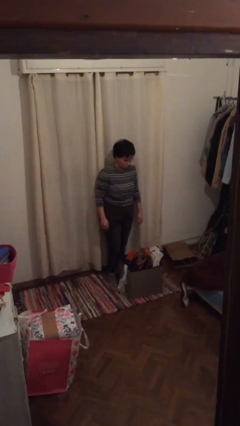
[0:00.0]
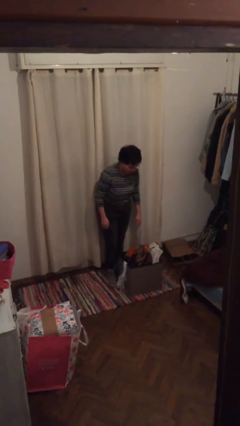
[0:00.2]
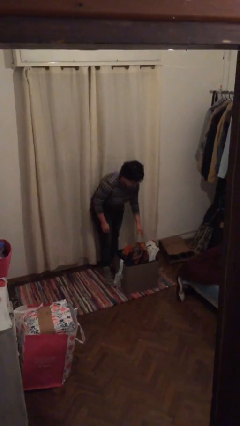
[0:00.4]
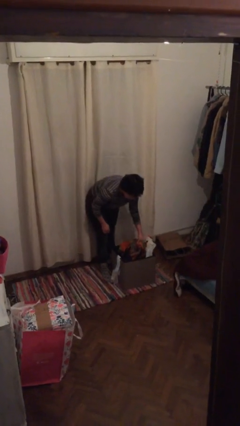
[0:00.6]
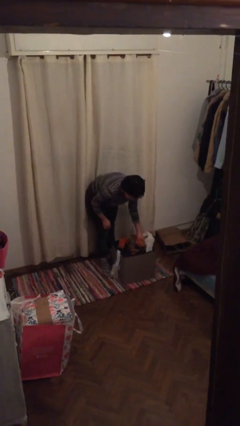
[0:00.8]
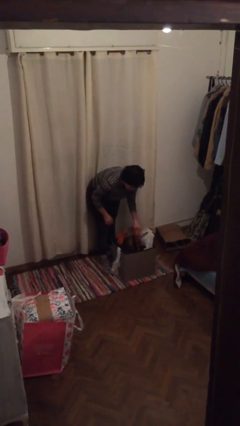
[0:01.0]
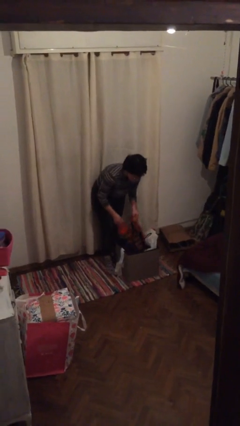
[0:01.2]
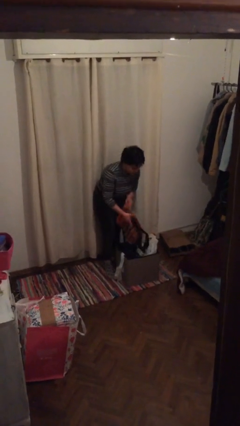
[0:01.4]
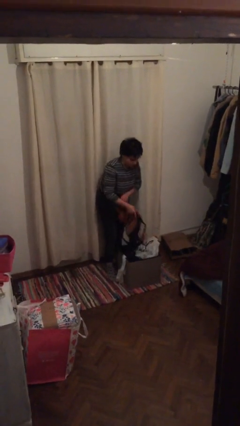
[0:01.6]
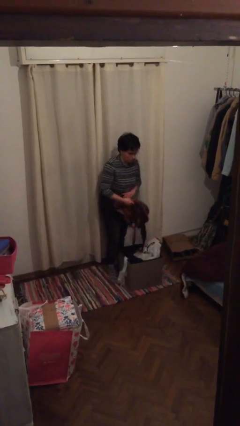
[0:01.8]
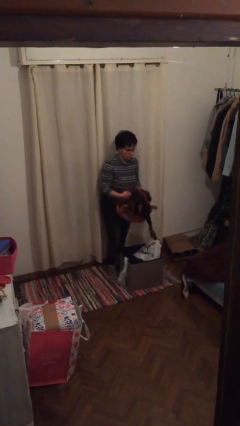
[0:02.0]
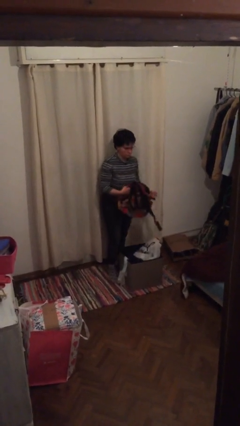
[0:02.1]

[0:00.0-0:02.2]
person takes object from basket

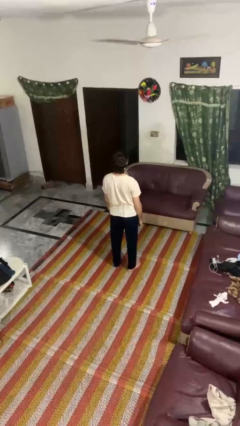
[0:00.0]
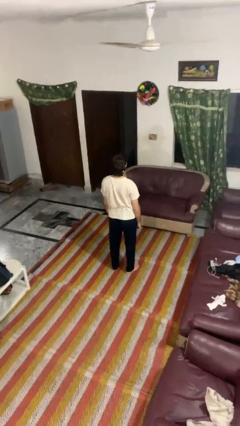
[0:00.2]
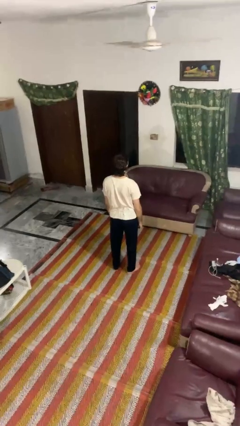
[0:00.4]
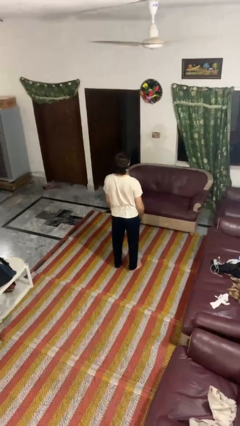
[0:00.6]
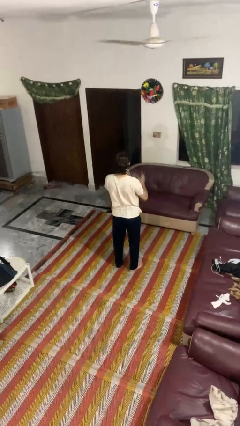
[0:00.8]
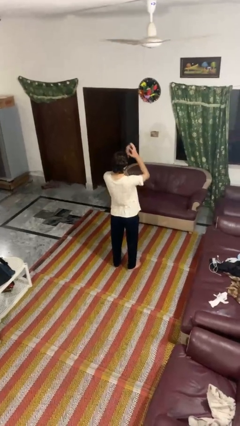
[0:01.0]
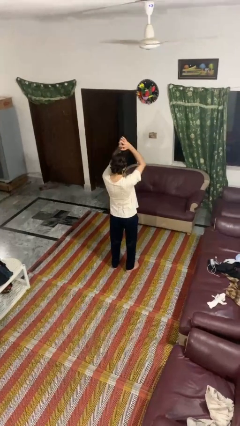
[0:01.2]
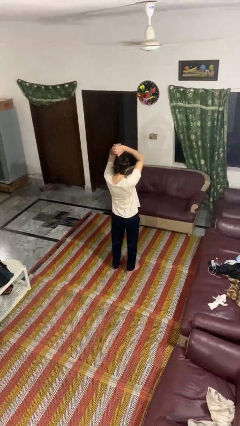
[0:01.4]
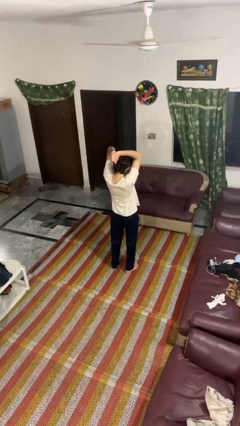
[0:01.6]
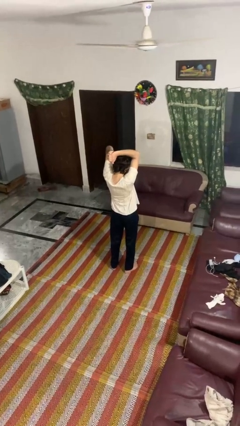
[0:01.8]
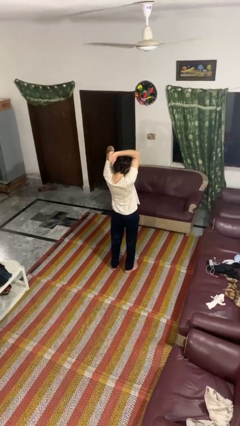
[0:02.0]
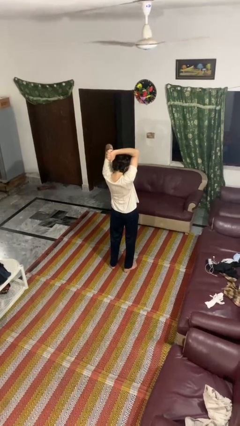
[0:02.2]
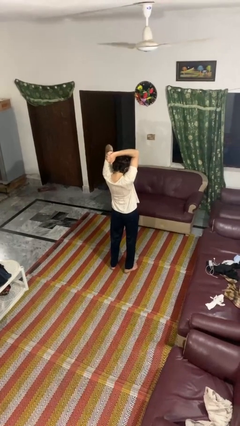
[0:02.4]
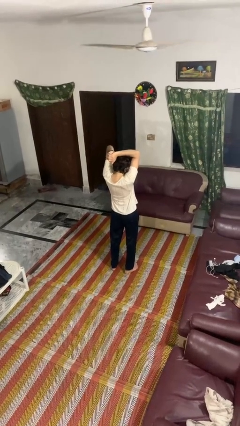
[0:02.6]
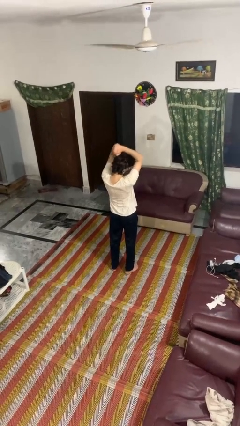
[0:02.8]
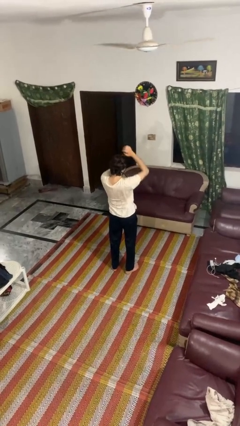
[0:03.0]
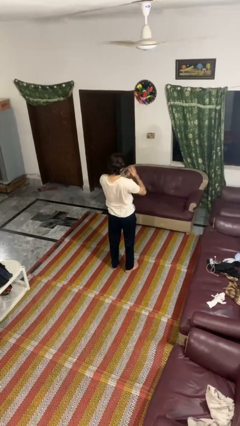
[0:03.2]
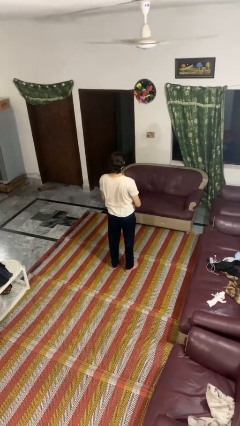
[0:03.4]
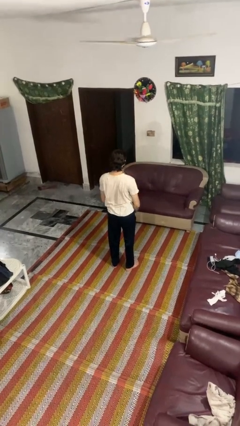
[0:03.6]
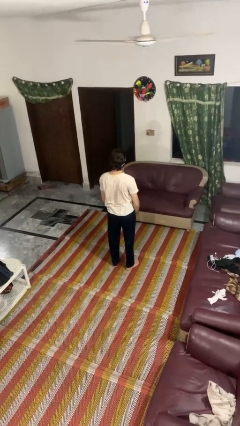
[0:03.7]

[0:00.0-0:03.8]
person stretches arms over head

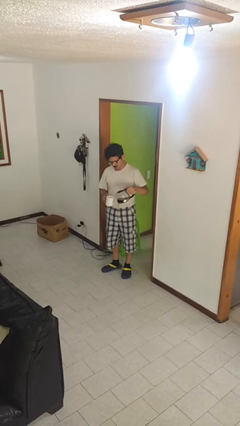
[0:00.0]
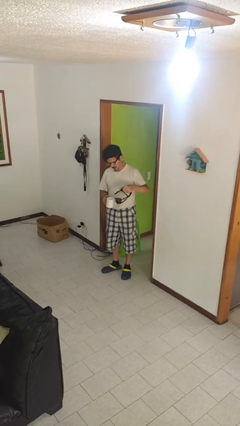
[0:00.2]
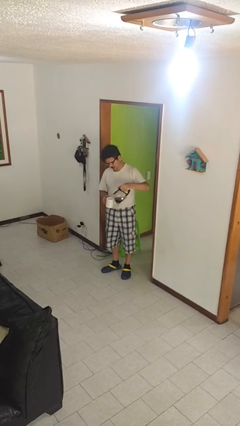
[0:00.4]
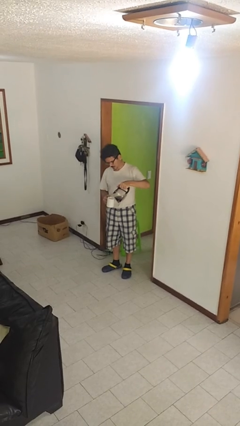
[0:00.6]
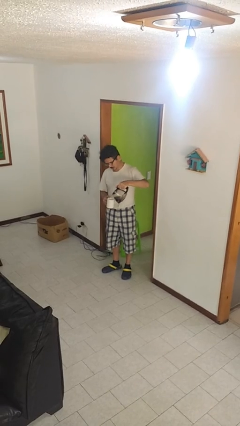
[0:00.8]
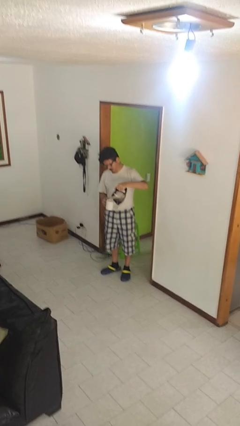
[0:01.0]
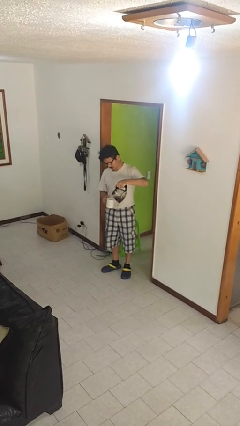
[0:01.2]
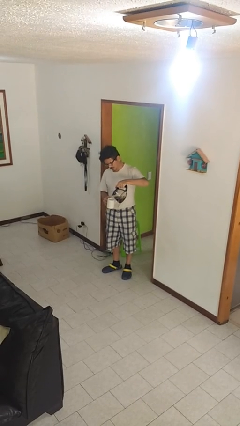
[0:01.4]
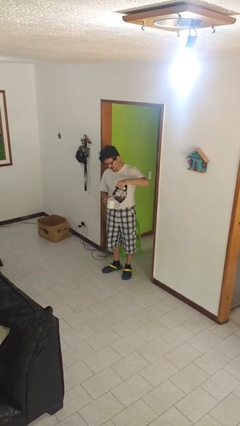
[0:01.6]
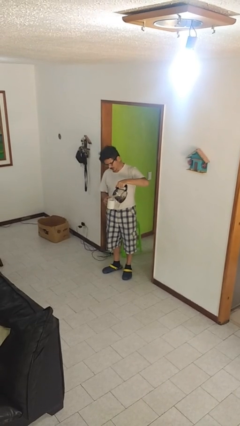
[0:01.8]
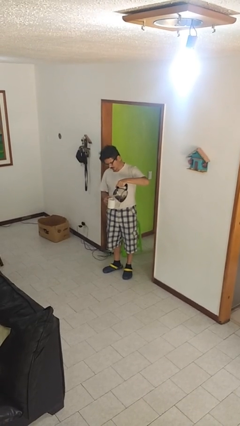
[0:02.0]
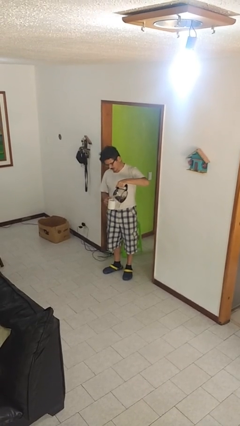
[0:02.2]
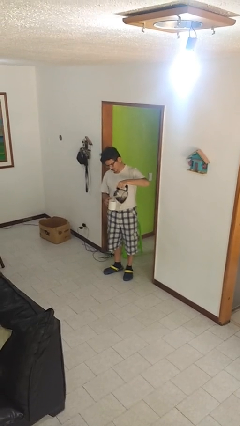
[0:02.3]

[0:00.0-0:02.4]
person pours coffee into mug

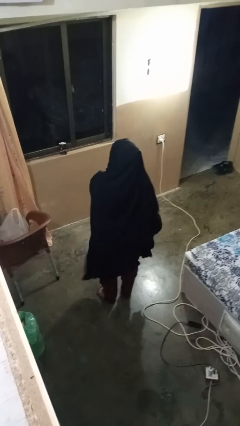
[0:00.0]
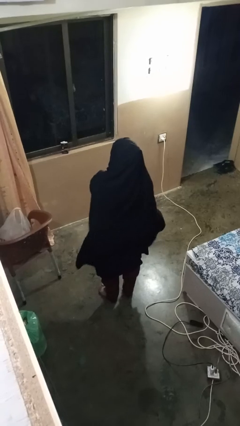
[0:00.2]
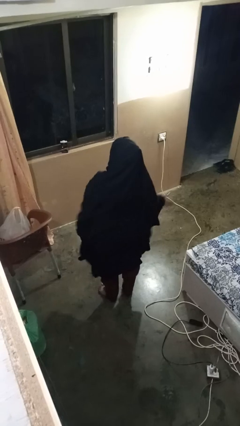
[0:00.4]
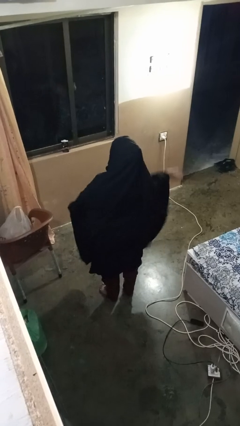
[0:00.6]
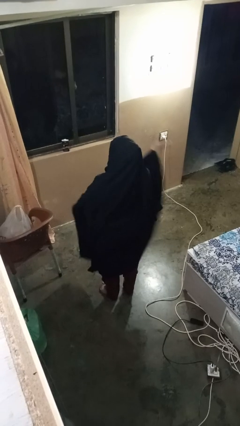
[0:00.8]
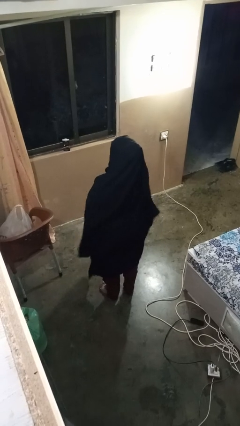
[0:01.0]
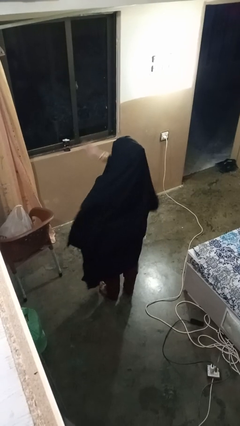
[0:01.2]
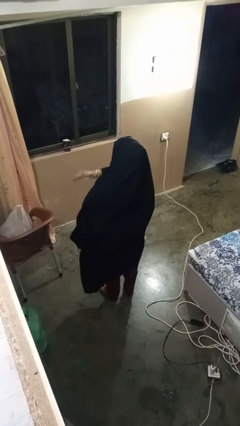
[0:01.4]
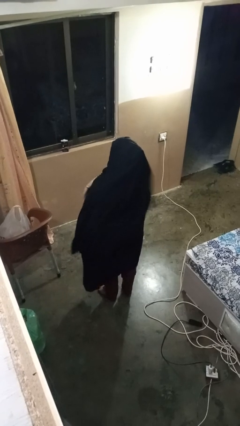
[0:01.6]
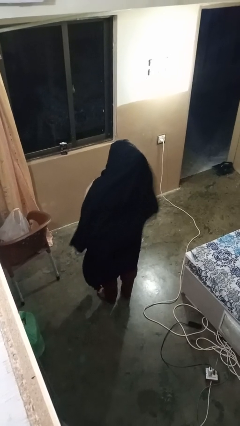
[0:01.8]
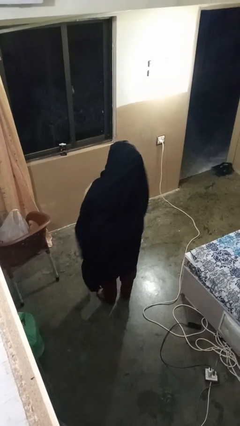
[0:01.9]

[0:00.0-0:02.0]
person gestures swipe left

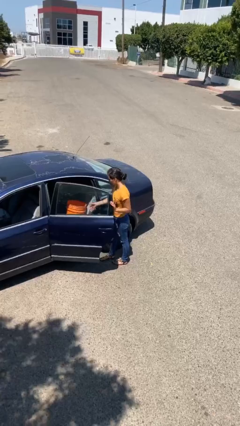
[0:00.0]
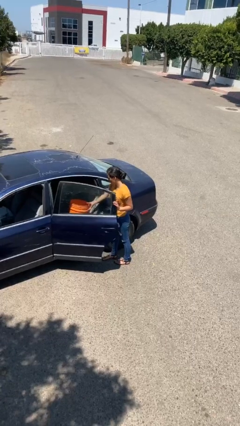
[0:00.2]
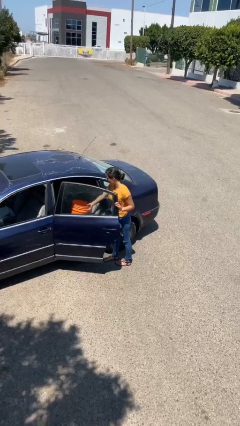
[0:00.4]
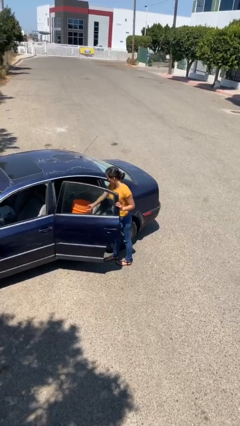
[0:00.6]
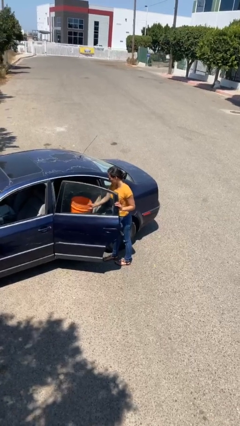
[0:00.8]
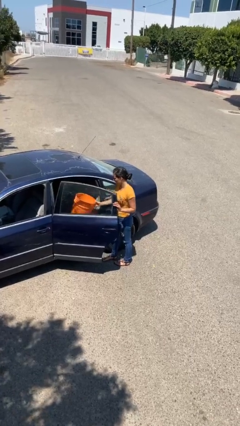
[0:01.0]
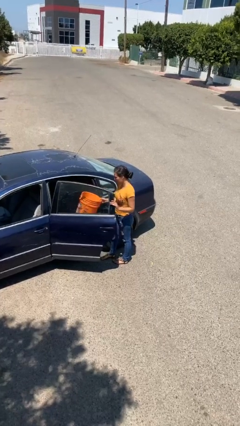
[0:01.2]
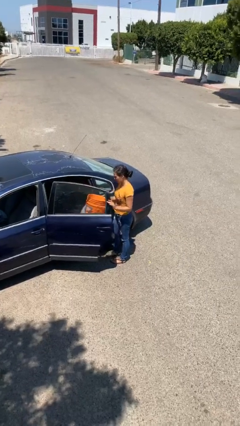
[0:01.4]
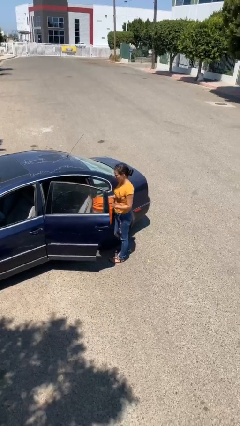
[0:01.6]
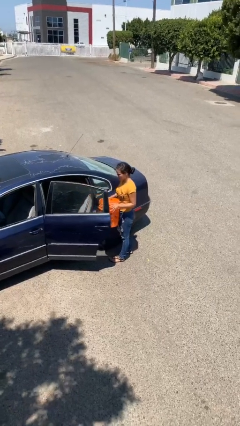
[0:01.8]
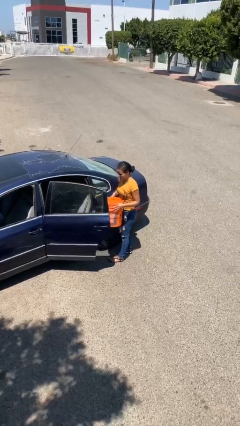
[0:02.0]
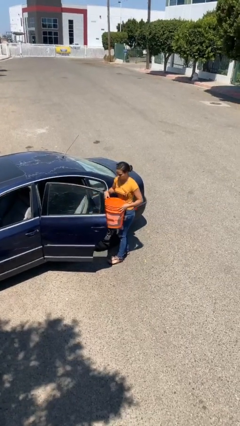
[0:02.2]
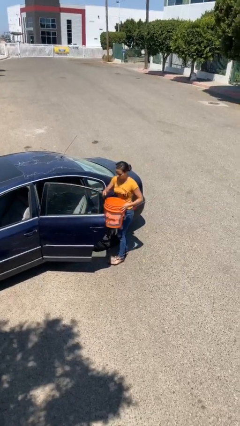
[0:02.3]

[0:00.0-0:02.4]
person unloads car

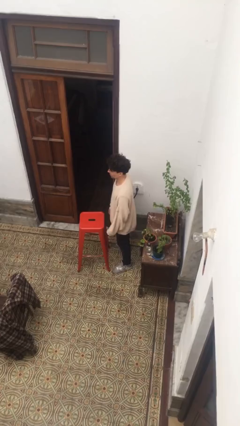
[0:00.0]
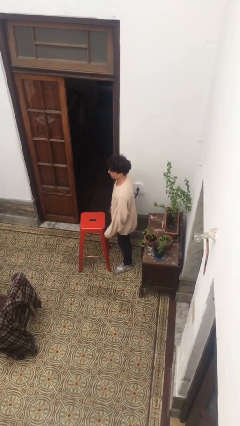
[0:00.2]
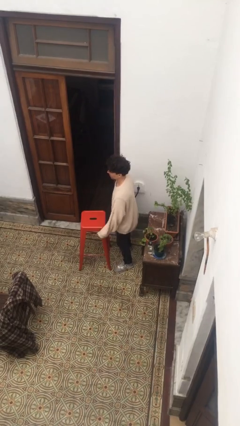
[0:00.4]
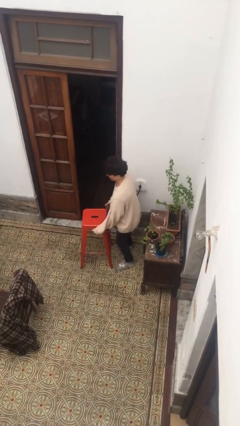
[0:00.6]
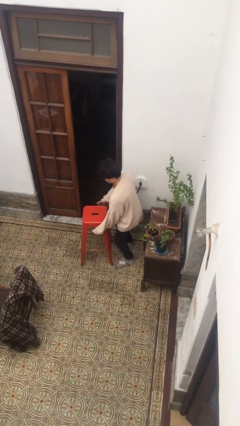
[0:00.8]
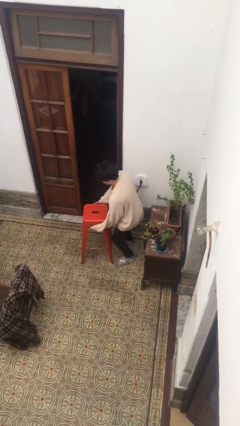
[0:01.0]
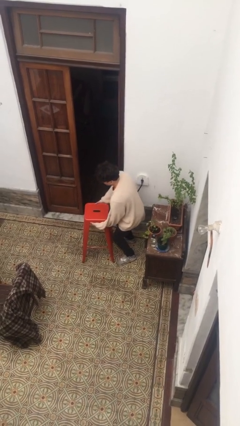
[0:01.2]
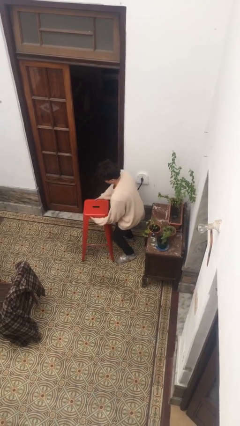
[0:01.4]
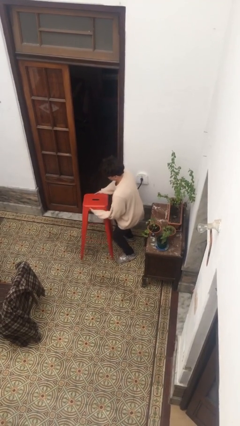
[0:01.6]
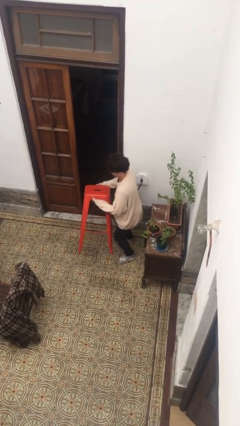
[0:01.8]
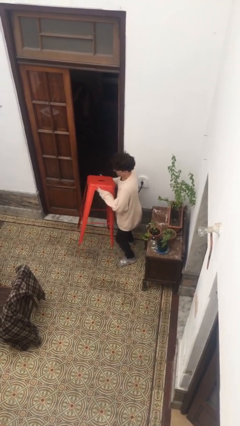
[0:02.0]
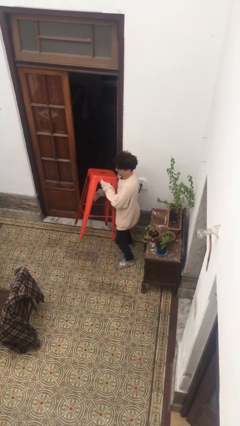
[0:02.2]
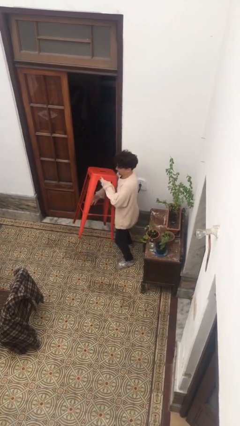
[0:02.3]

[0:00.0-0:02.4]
person picks up object from floor

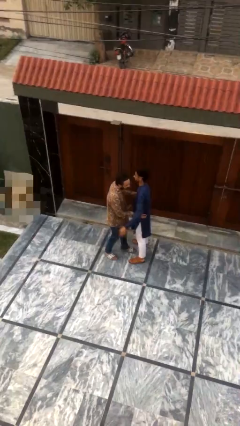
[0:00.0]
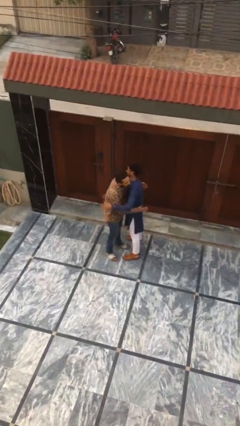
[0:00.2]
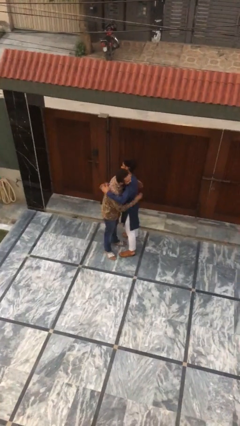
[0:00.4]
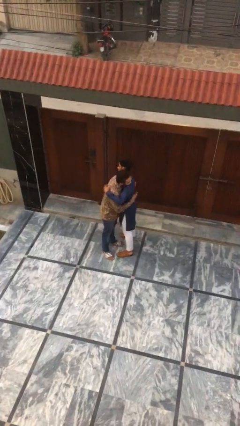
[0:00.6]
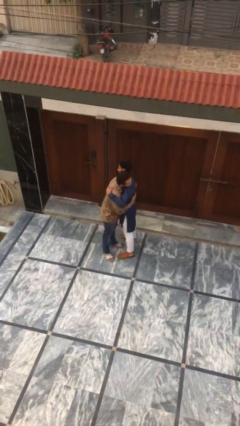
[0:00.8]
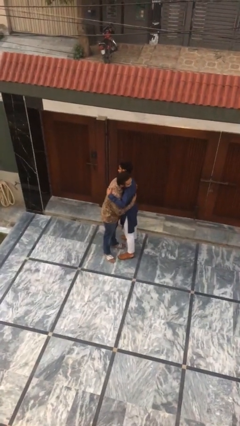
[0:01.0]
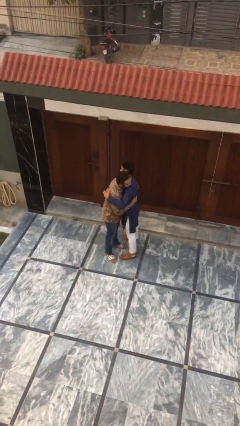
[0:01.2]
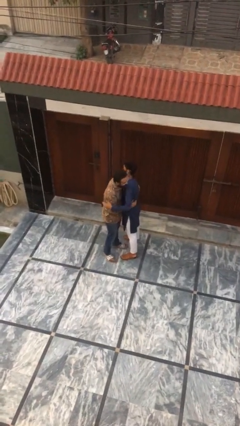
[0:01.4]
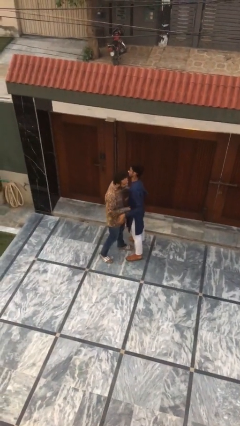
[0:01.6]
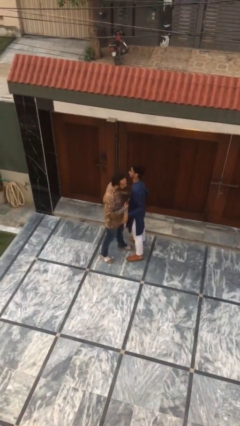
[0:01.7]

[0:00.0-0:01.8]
person embraces person
